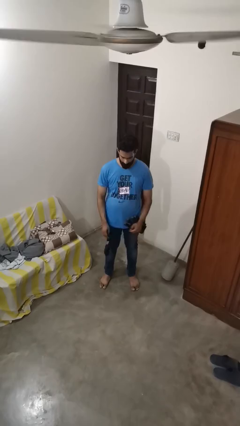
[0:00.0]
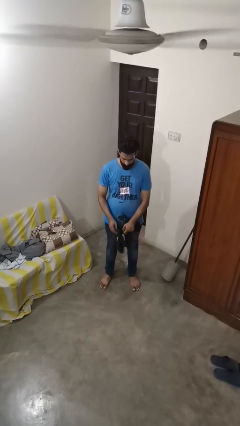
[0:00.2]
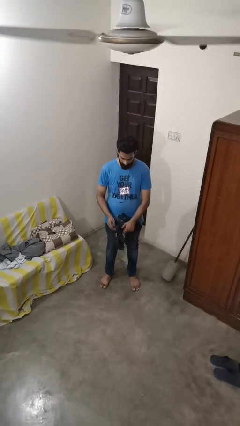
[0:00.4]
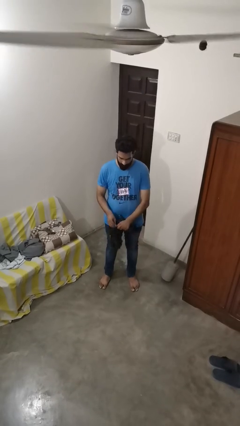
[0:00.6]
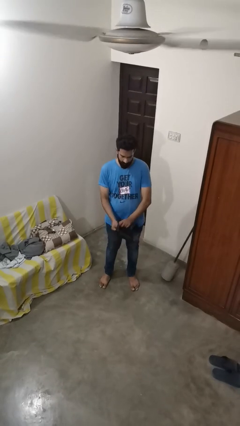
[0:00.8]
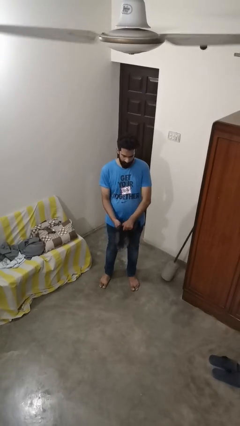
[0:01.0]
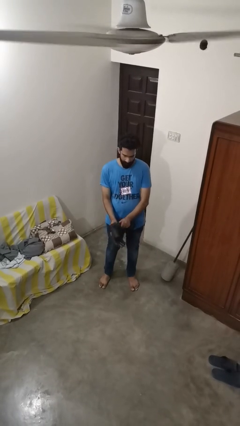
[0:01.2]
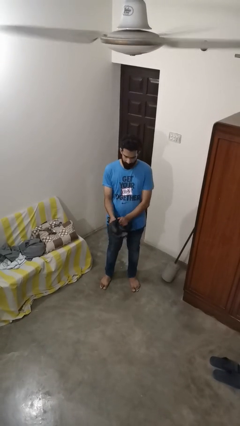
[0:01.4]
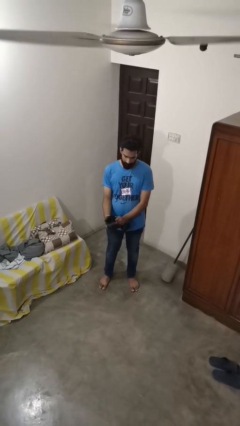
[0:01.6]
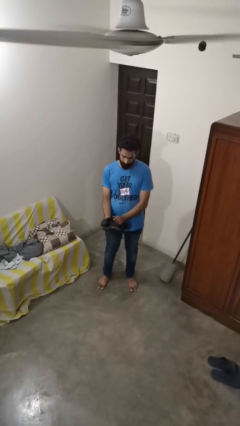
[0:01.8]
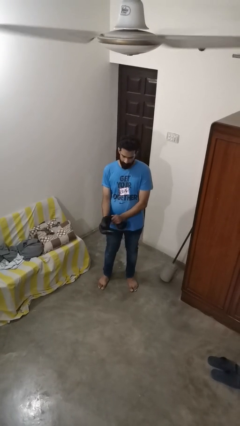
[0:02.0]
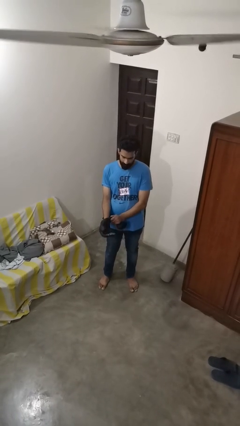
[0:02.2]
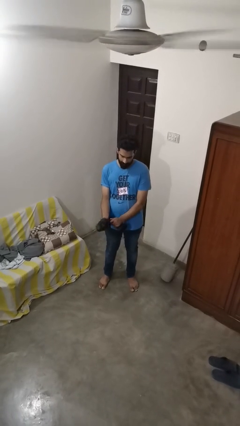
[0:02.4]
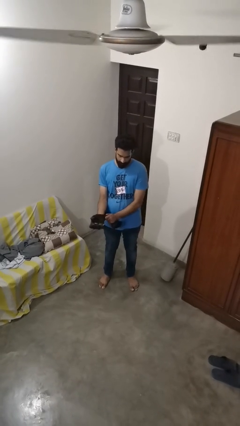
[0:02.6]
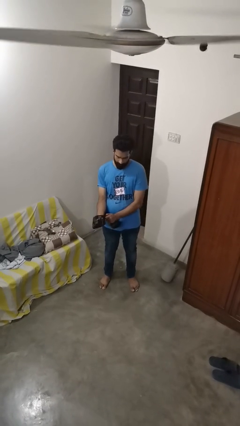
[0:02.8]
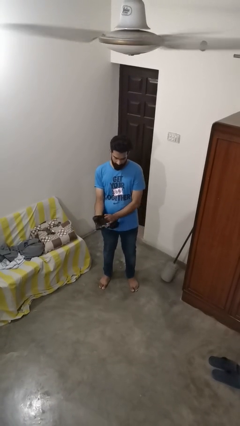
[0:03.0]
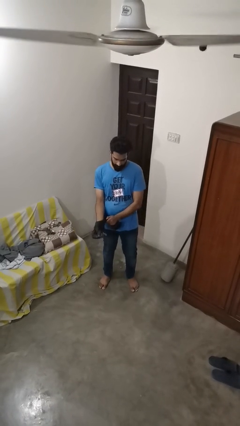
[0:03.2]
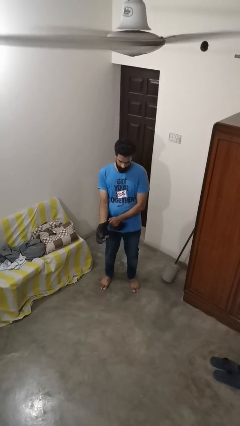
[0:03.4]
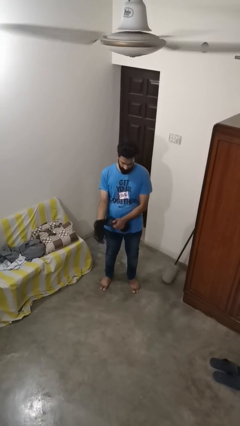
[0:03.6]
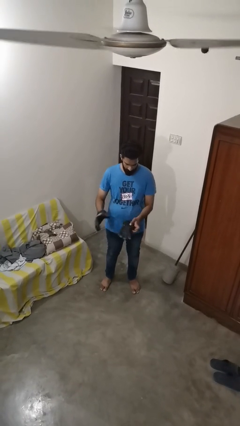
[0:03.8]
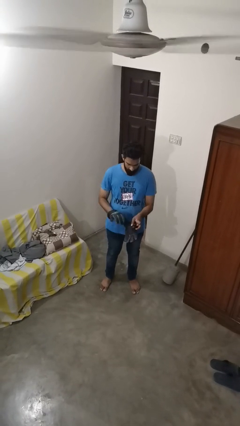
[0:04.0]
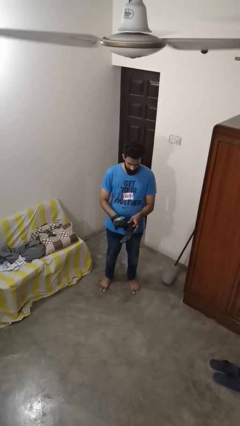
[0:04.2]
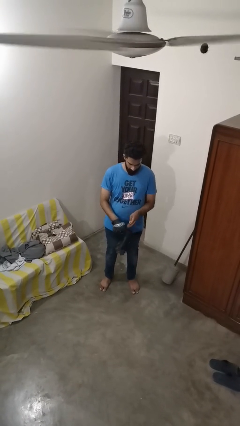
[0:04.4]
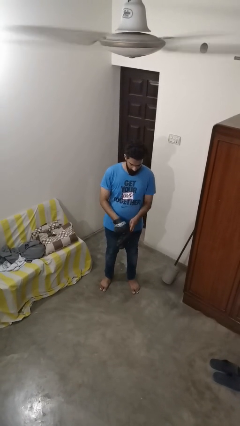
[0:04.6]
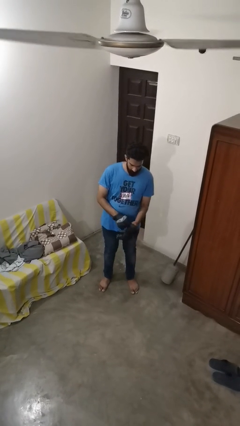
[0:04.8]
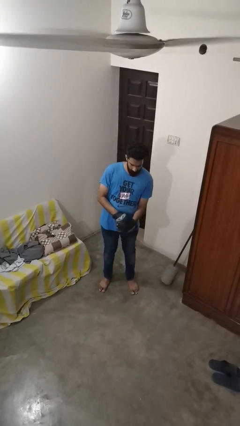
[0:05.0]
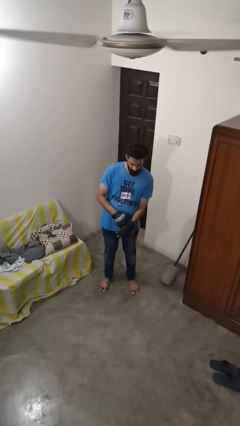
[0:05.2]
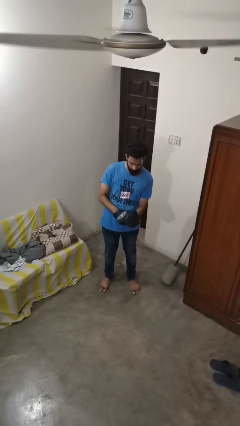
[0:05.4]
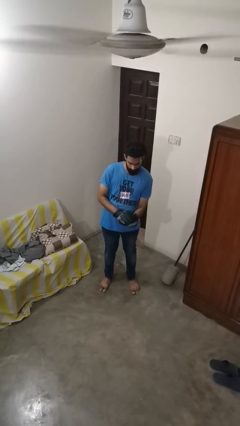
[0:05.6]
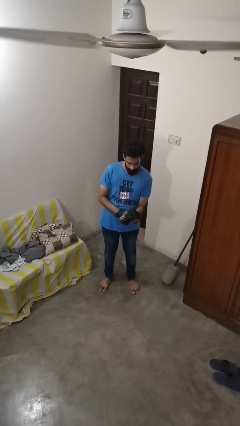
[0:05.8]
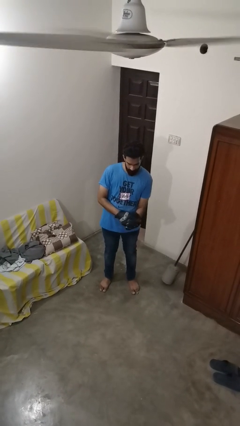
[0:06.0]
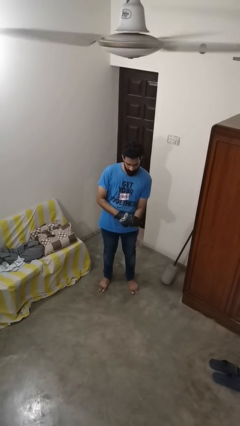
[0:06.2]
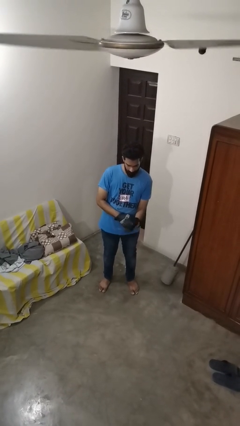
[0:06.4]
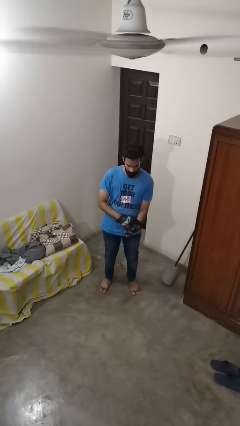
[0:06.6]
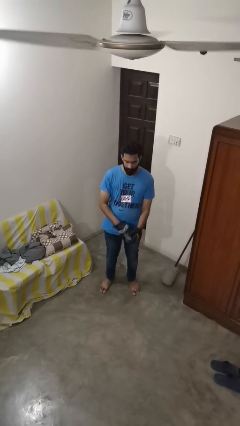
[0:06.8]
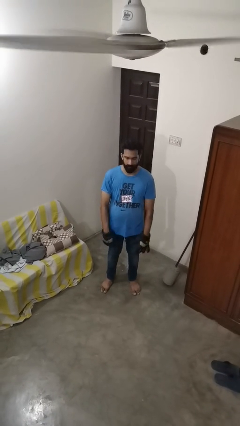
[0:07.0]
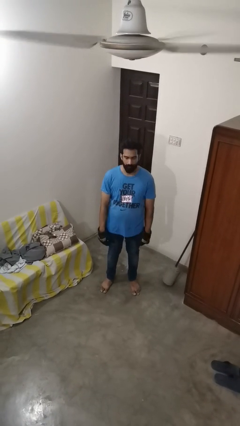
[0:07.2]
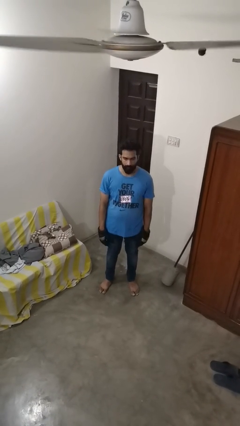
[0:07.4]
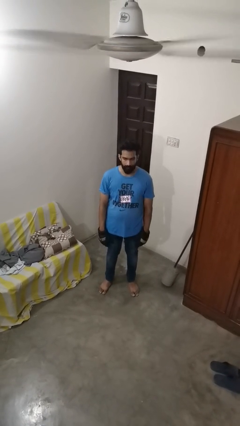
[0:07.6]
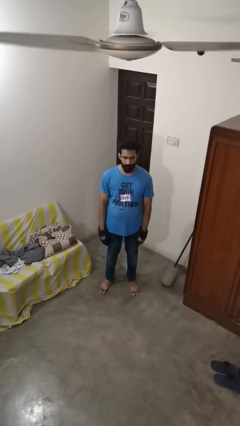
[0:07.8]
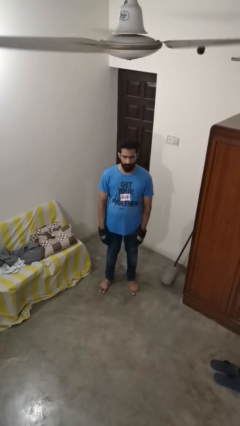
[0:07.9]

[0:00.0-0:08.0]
person puts on gloves

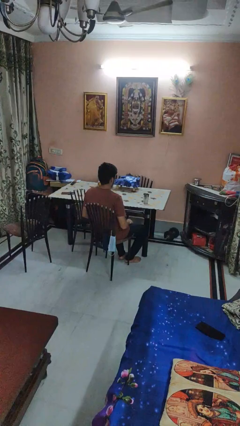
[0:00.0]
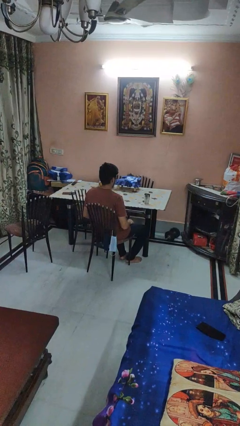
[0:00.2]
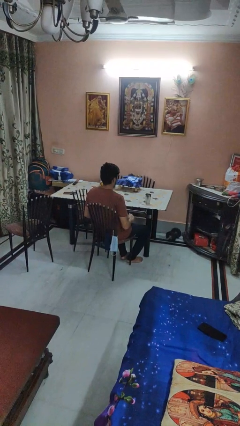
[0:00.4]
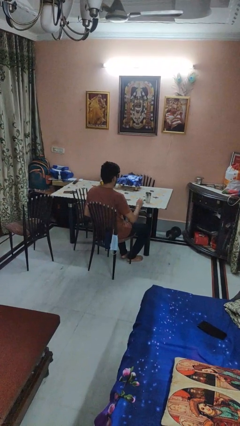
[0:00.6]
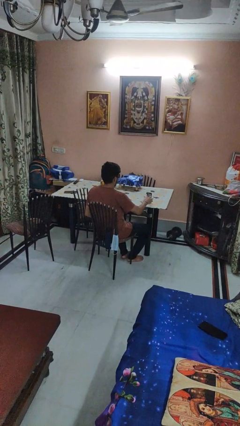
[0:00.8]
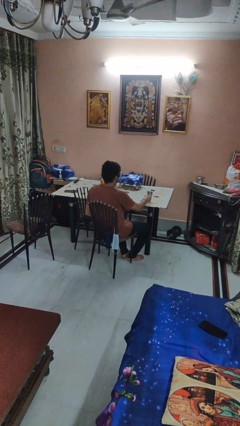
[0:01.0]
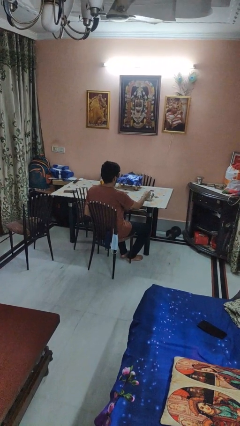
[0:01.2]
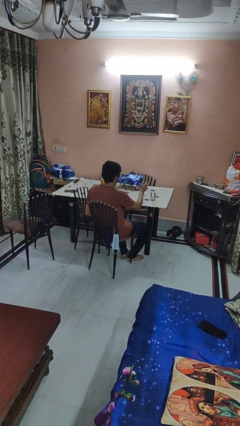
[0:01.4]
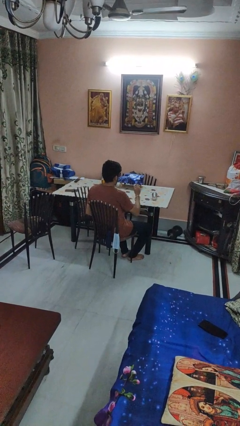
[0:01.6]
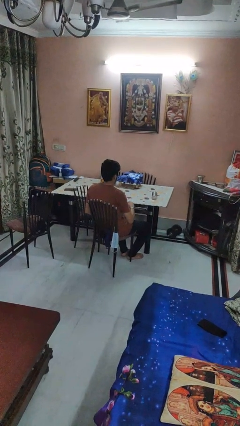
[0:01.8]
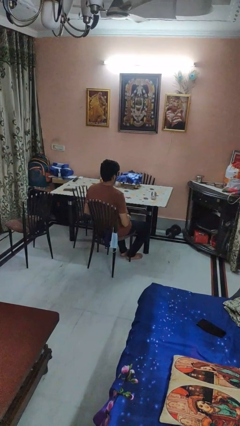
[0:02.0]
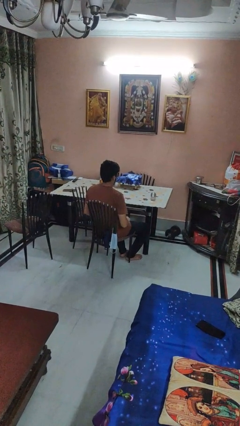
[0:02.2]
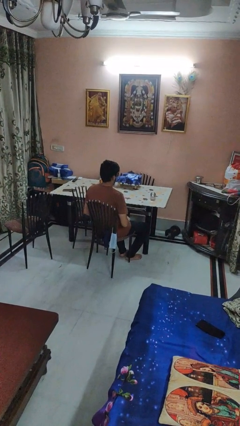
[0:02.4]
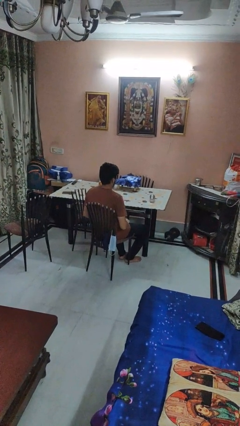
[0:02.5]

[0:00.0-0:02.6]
person knocks over glass

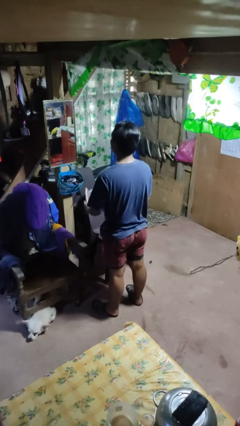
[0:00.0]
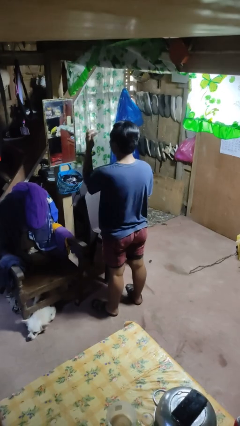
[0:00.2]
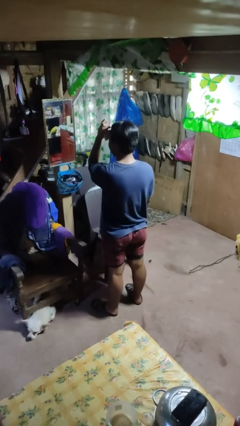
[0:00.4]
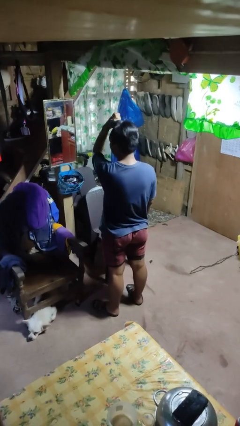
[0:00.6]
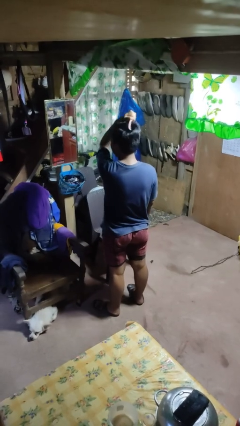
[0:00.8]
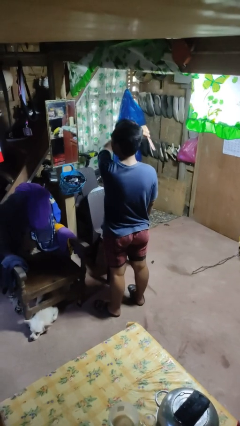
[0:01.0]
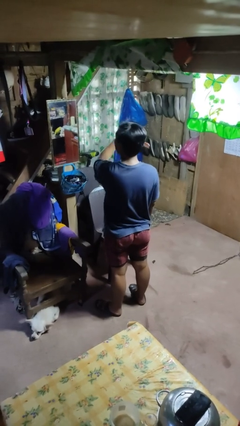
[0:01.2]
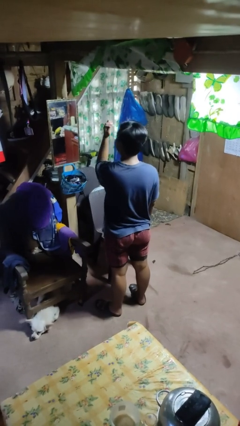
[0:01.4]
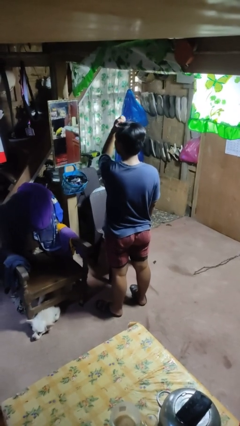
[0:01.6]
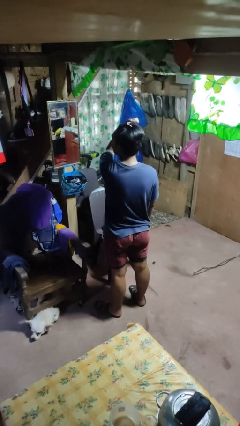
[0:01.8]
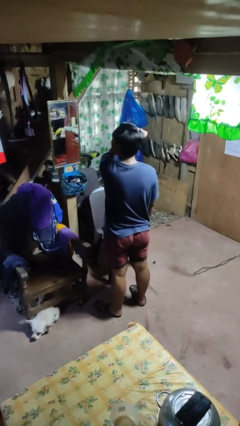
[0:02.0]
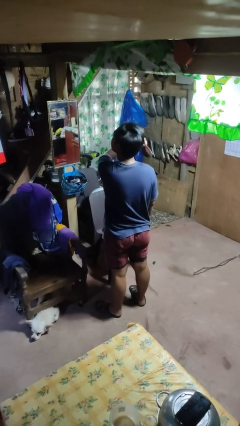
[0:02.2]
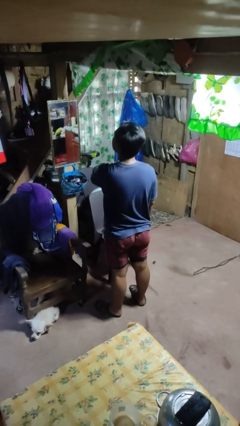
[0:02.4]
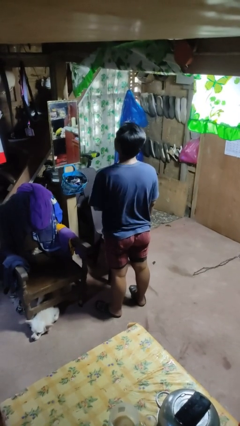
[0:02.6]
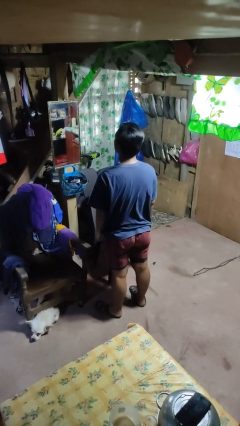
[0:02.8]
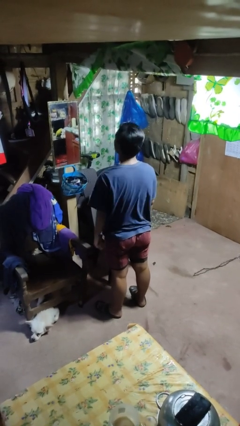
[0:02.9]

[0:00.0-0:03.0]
person brushes hair

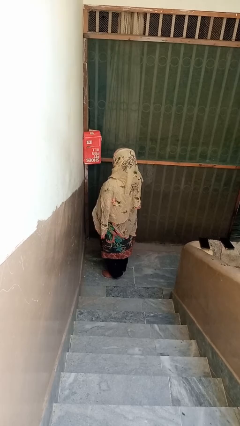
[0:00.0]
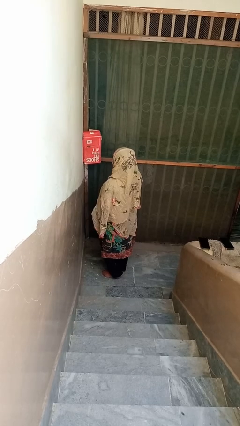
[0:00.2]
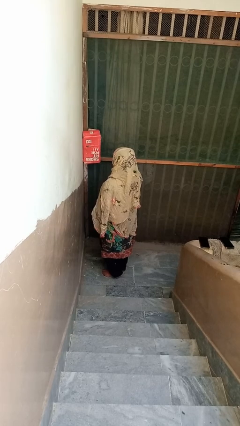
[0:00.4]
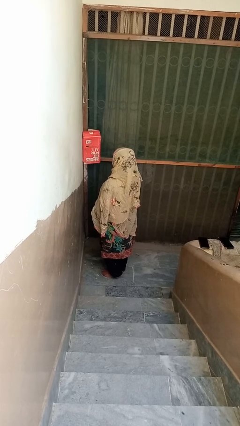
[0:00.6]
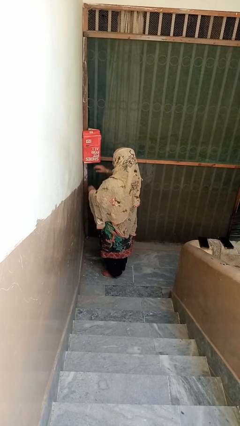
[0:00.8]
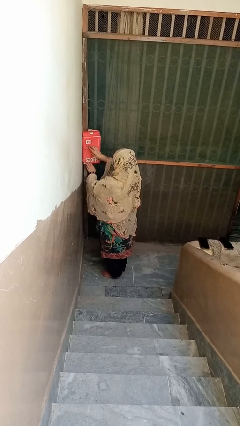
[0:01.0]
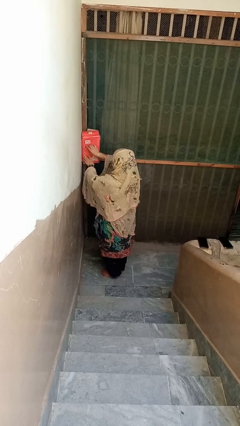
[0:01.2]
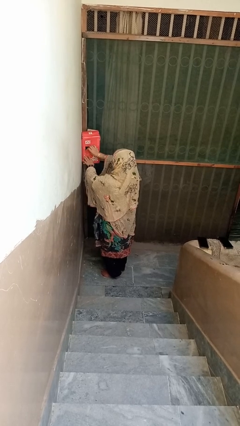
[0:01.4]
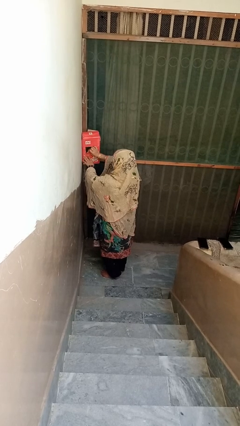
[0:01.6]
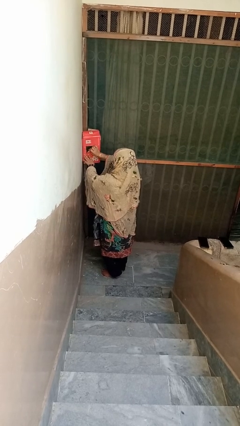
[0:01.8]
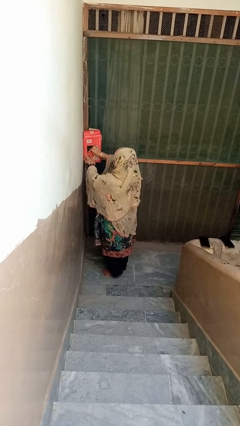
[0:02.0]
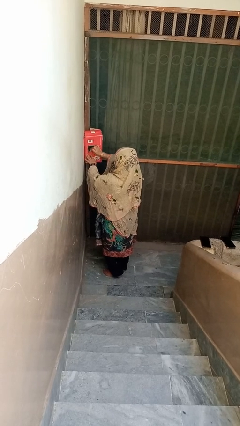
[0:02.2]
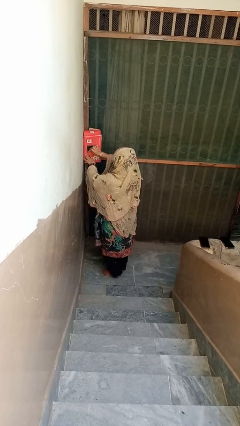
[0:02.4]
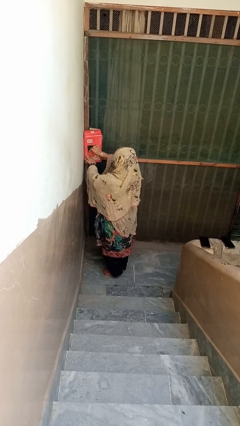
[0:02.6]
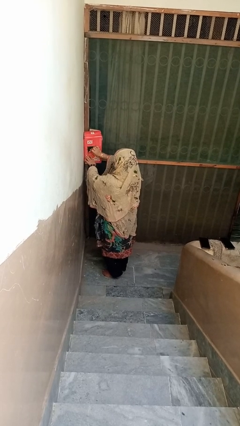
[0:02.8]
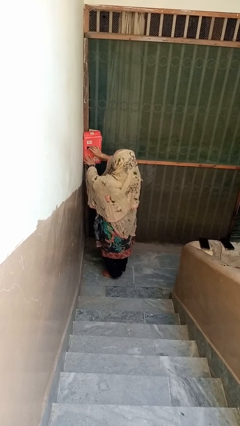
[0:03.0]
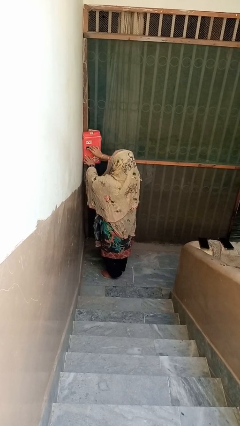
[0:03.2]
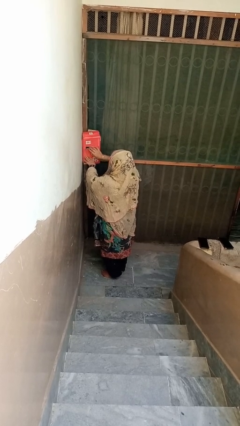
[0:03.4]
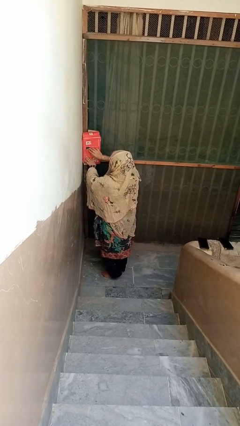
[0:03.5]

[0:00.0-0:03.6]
person opens mailbox

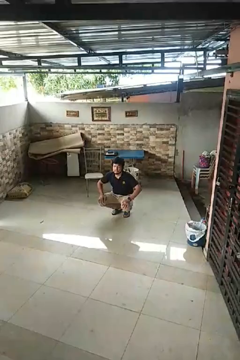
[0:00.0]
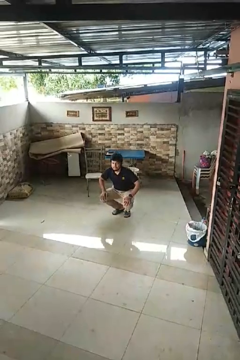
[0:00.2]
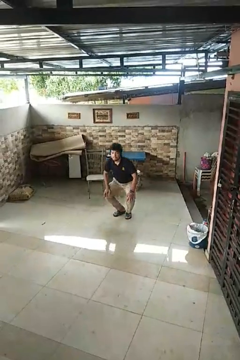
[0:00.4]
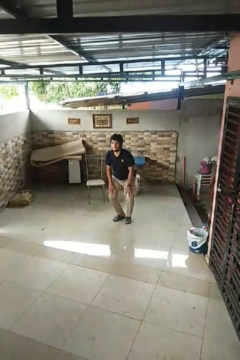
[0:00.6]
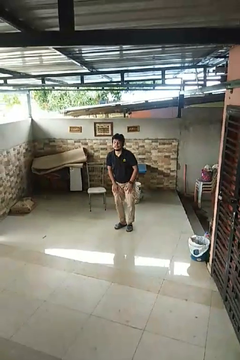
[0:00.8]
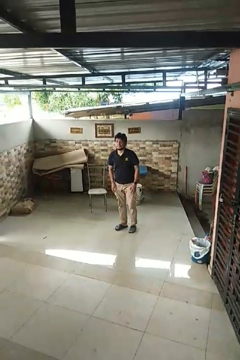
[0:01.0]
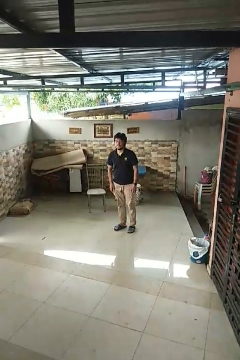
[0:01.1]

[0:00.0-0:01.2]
person stands up
